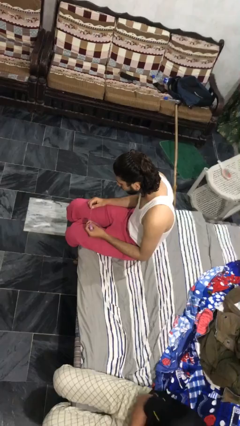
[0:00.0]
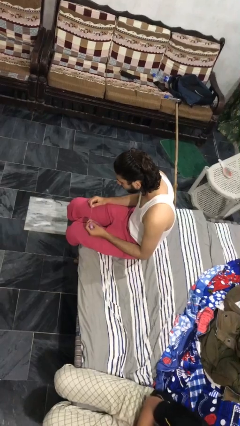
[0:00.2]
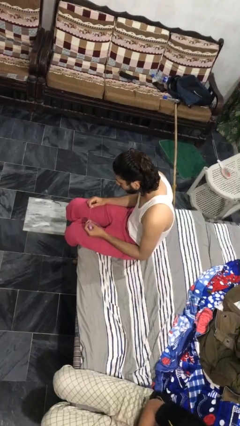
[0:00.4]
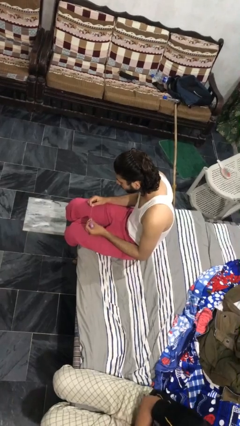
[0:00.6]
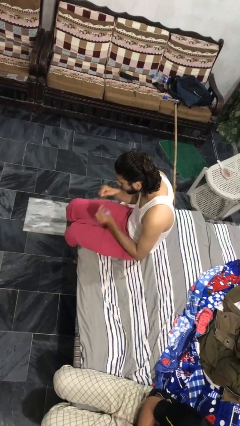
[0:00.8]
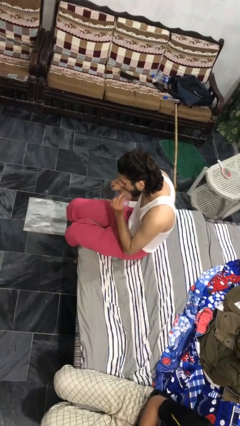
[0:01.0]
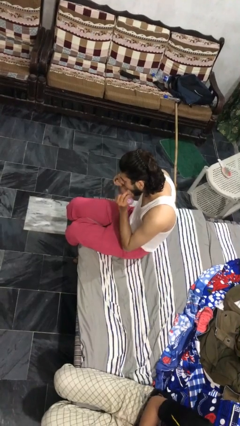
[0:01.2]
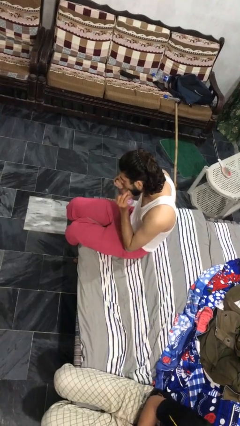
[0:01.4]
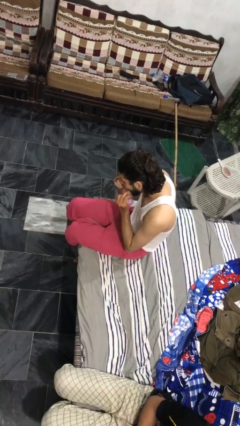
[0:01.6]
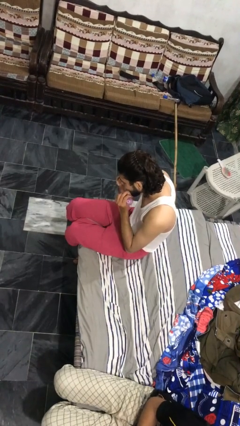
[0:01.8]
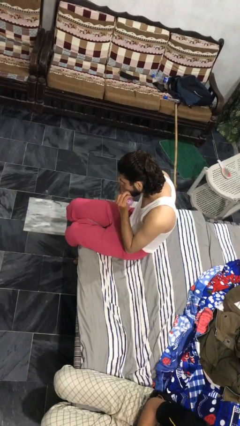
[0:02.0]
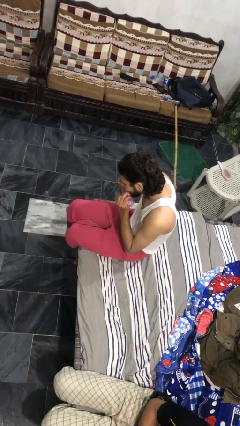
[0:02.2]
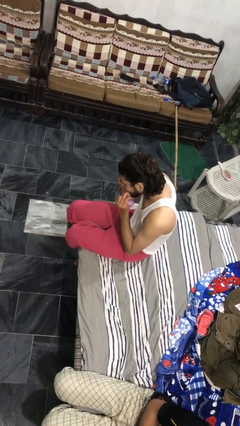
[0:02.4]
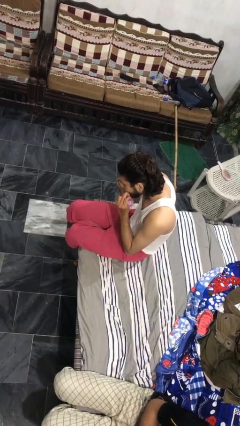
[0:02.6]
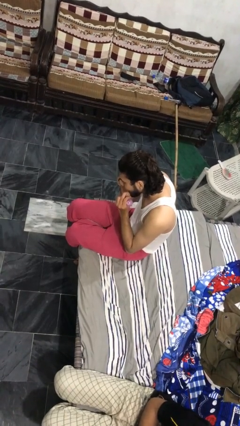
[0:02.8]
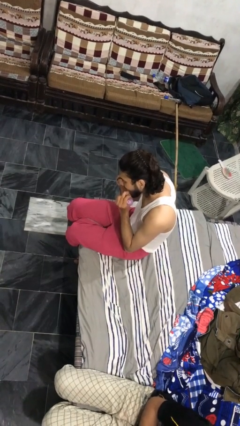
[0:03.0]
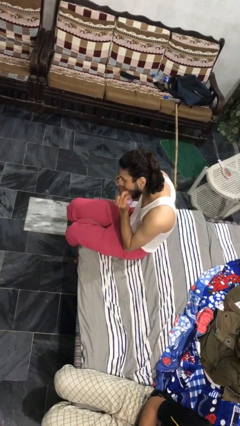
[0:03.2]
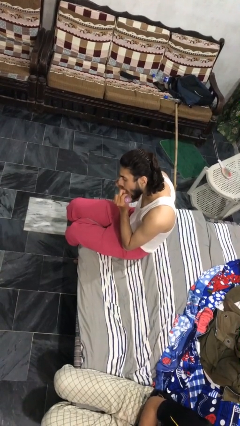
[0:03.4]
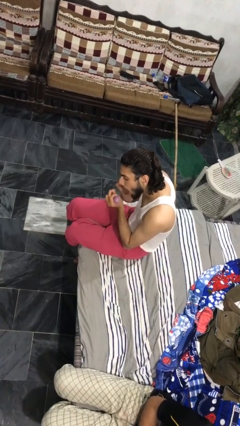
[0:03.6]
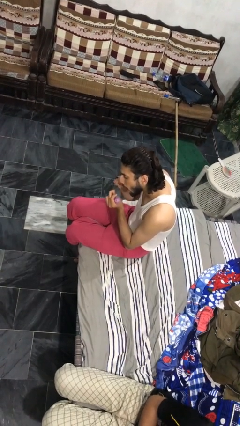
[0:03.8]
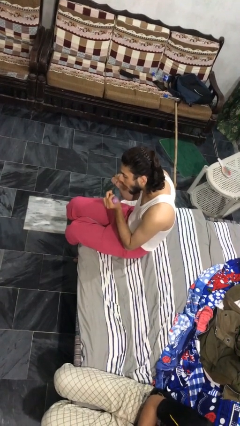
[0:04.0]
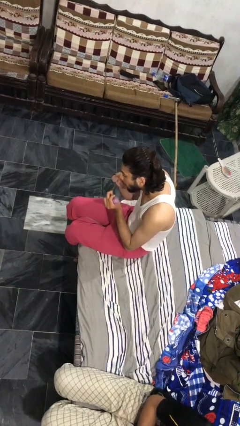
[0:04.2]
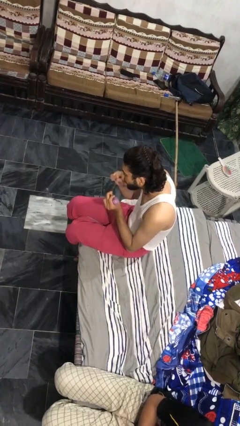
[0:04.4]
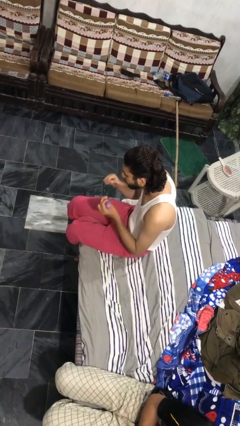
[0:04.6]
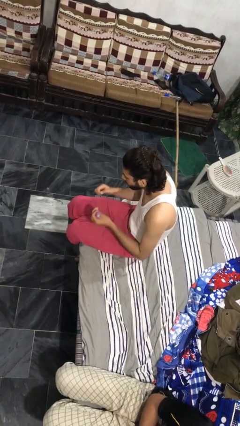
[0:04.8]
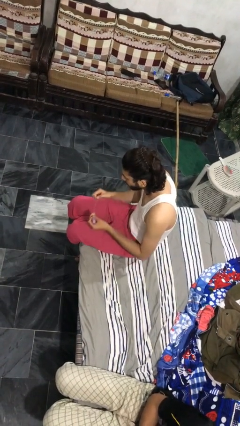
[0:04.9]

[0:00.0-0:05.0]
person flosses

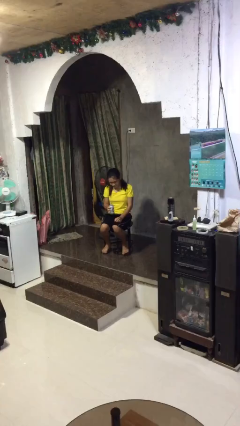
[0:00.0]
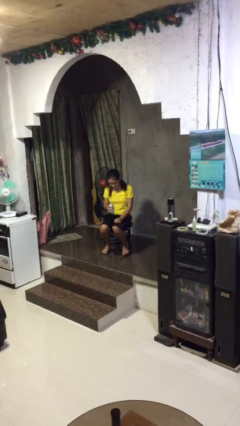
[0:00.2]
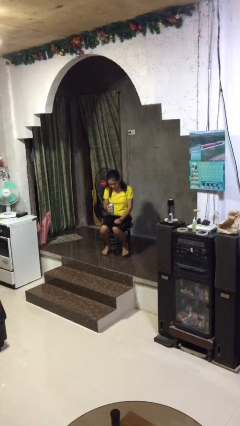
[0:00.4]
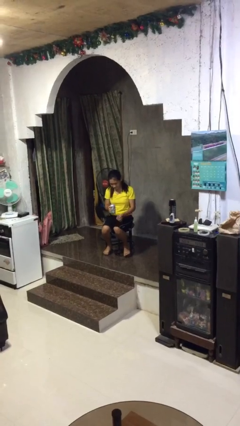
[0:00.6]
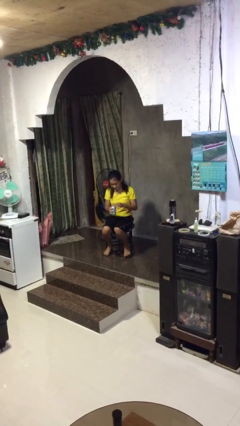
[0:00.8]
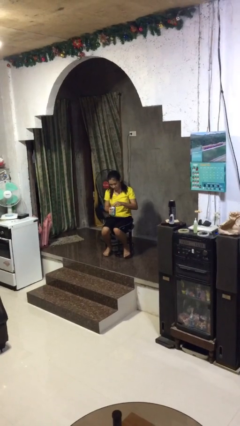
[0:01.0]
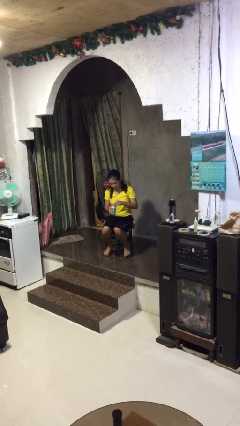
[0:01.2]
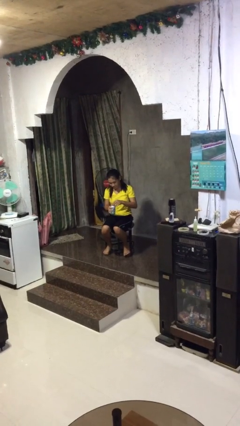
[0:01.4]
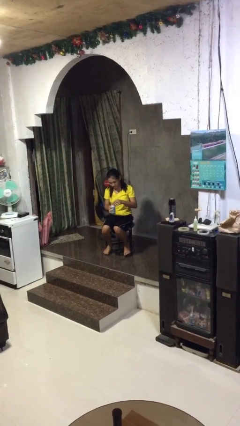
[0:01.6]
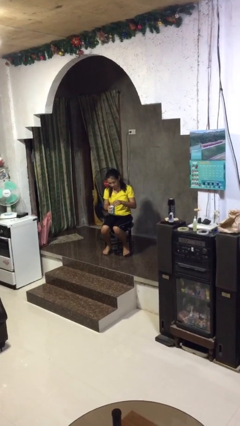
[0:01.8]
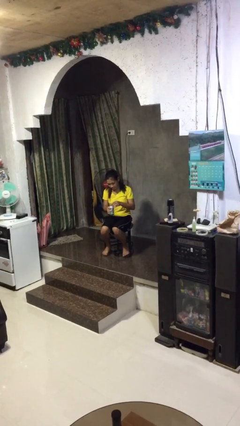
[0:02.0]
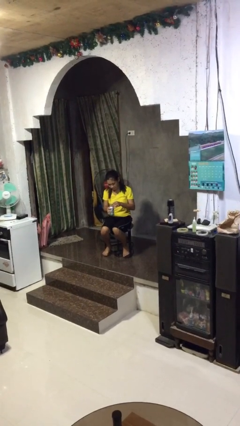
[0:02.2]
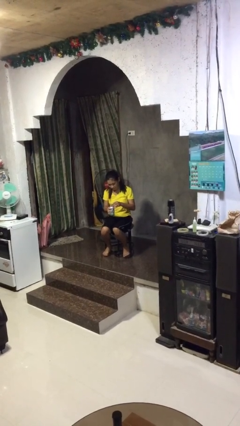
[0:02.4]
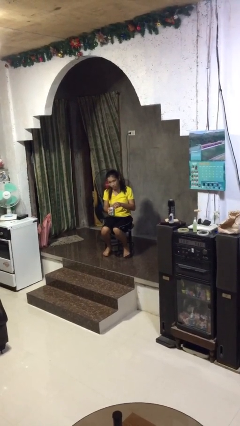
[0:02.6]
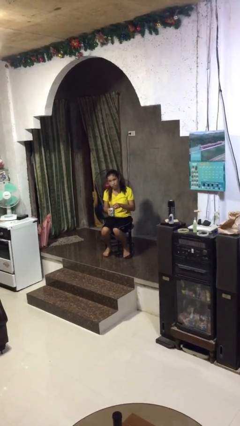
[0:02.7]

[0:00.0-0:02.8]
person opens beverage can

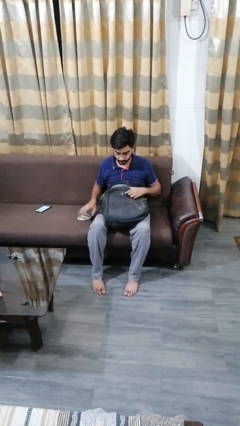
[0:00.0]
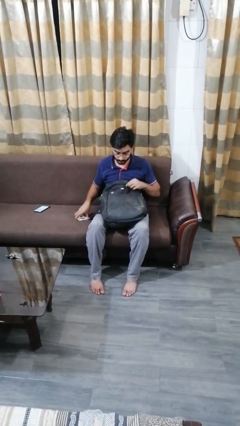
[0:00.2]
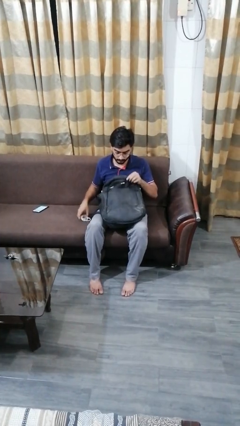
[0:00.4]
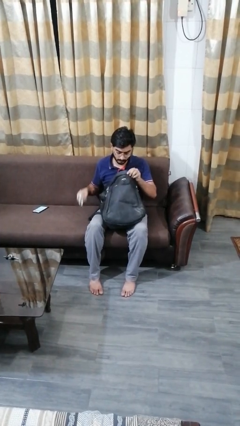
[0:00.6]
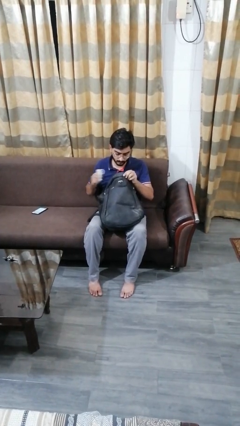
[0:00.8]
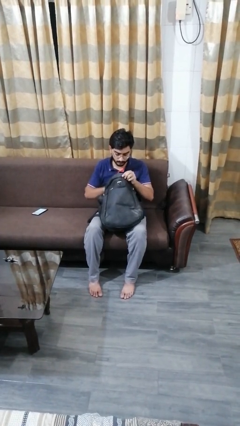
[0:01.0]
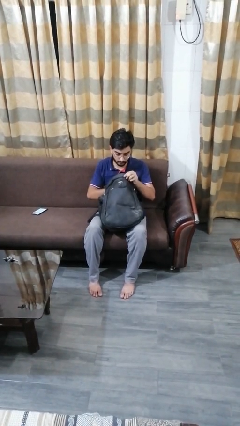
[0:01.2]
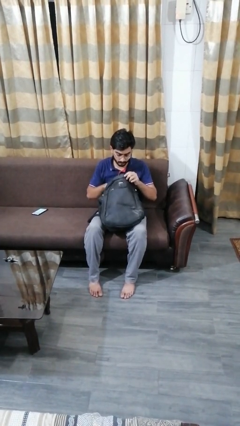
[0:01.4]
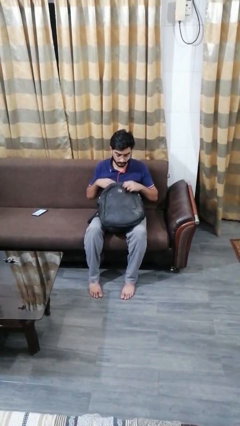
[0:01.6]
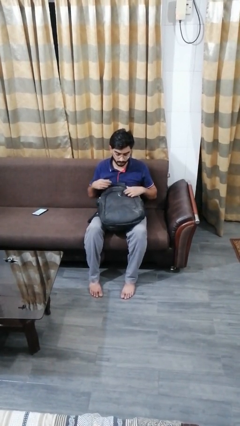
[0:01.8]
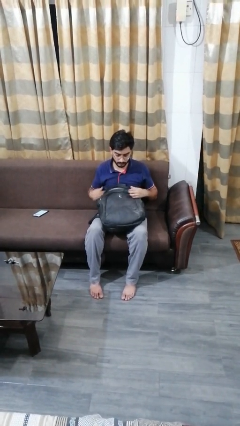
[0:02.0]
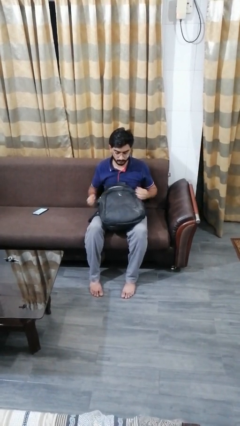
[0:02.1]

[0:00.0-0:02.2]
person puts object into backpack

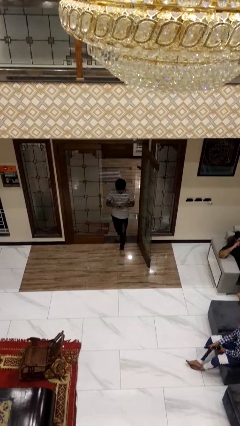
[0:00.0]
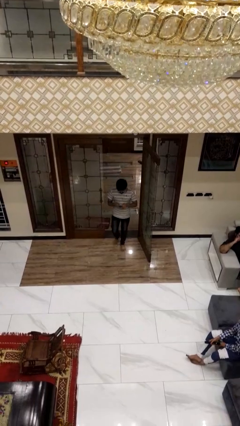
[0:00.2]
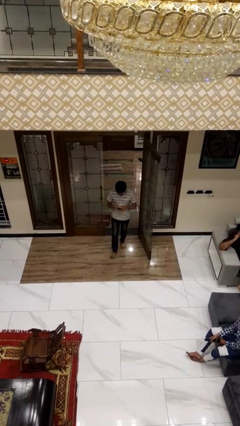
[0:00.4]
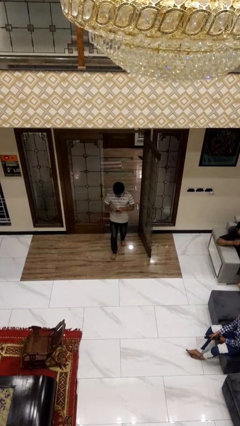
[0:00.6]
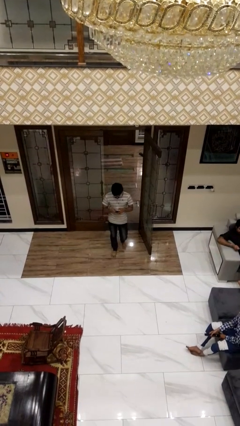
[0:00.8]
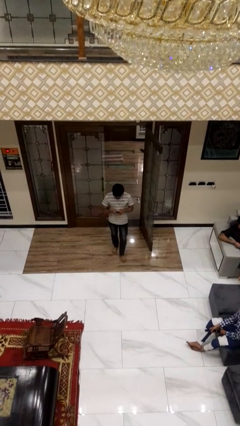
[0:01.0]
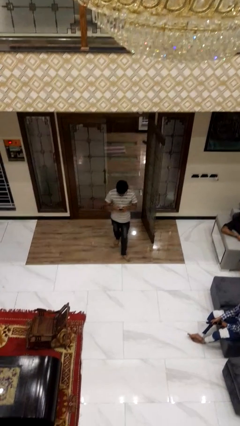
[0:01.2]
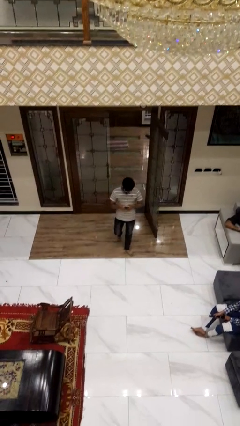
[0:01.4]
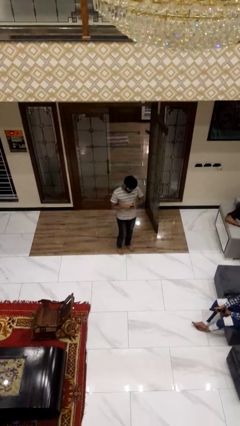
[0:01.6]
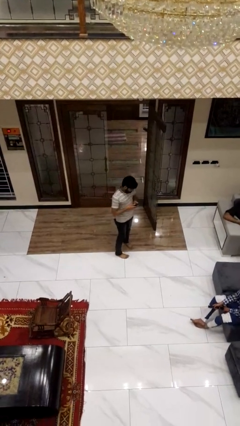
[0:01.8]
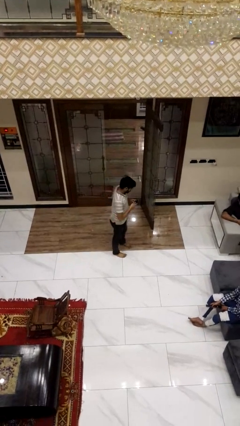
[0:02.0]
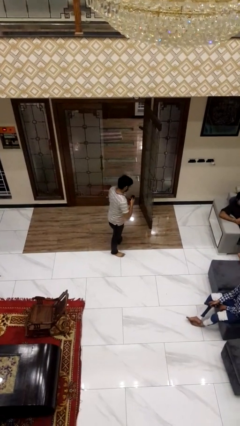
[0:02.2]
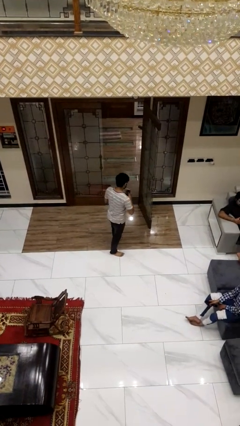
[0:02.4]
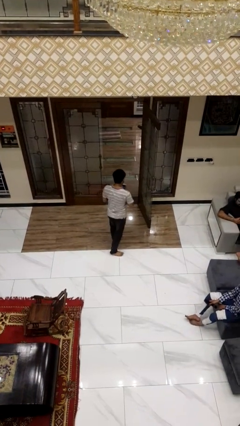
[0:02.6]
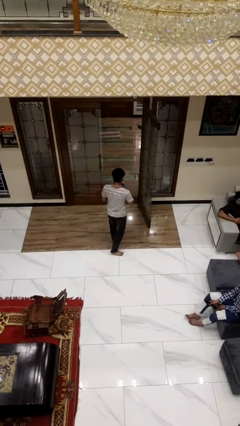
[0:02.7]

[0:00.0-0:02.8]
person enters scene through structure

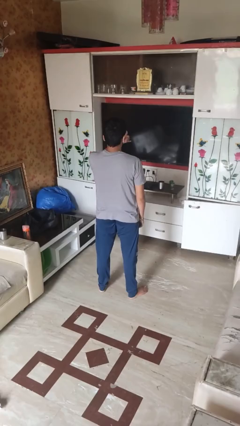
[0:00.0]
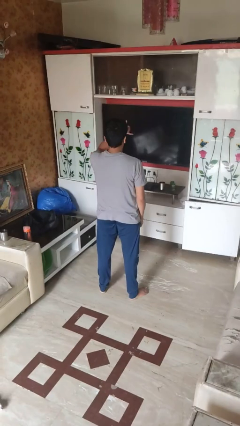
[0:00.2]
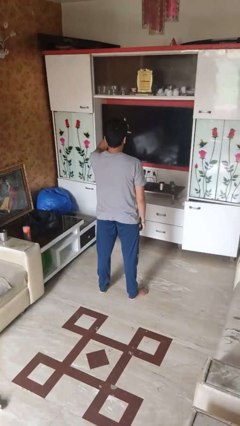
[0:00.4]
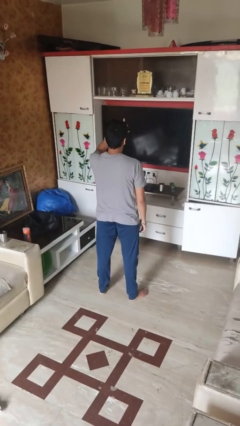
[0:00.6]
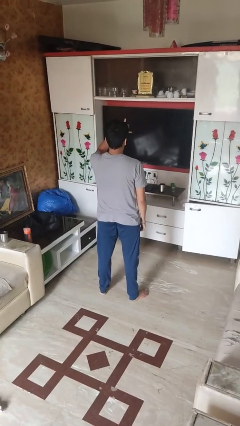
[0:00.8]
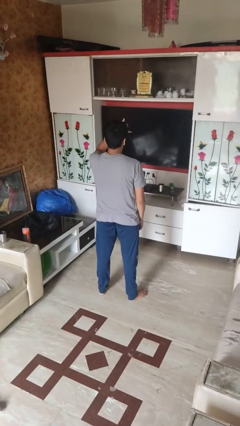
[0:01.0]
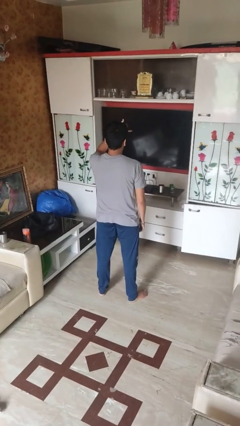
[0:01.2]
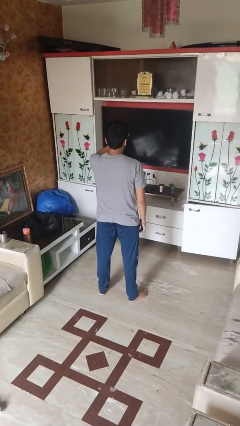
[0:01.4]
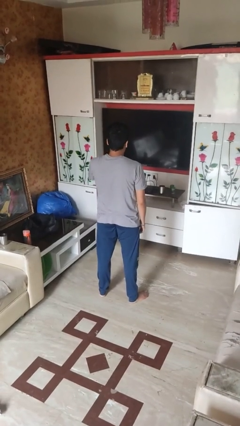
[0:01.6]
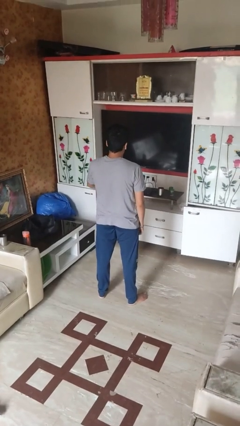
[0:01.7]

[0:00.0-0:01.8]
person gestures hang loose

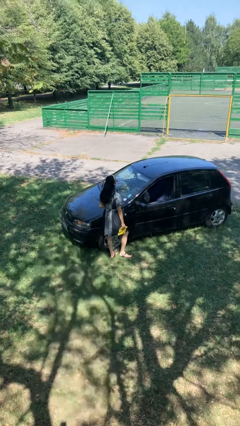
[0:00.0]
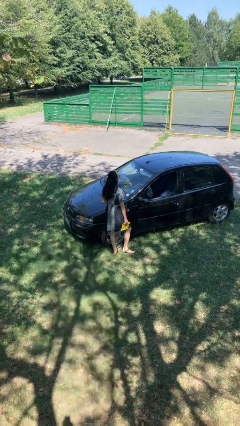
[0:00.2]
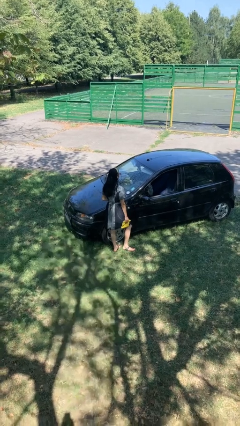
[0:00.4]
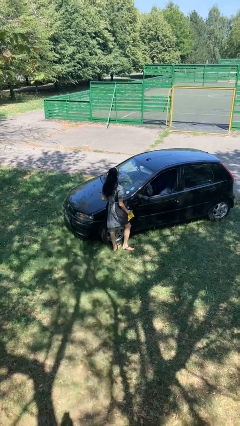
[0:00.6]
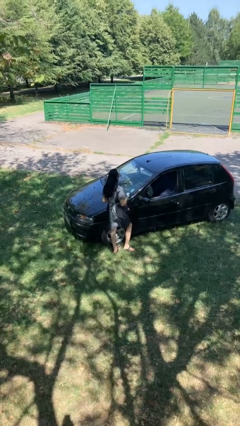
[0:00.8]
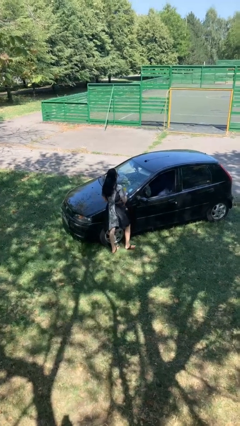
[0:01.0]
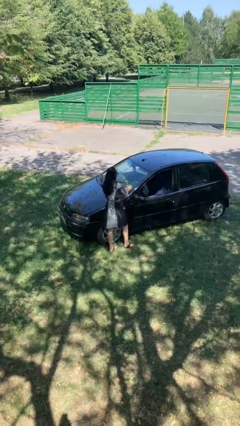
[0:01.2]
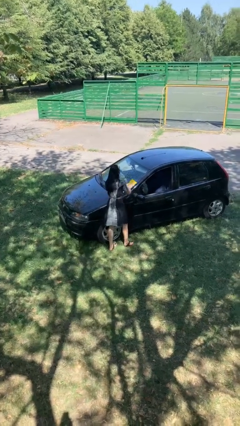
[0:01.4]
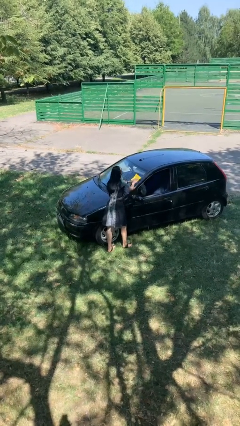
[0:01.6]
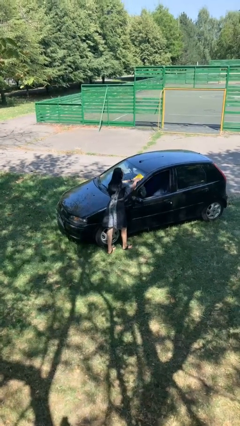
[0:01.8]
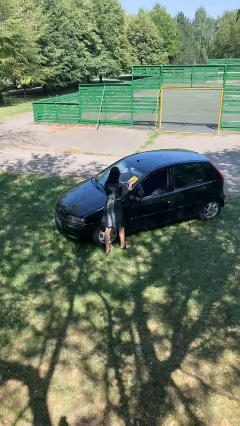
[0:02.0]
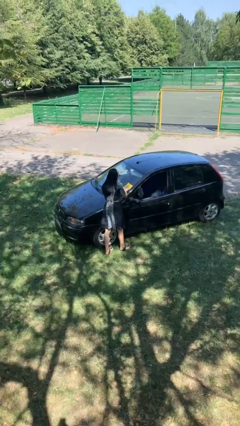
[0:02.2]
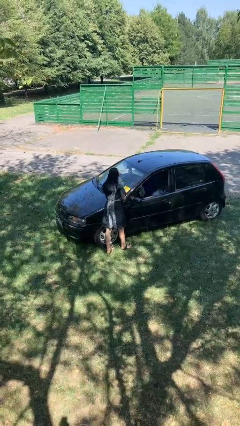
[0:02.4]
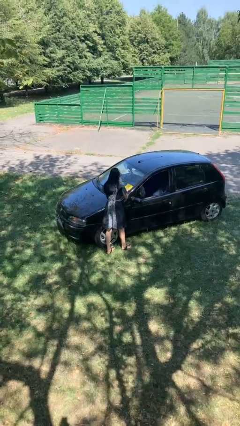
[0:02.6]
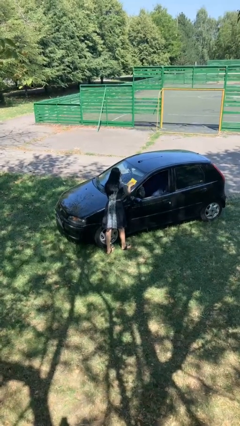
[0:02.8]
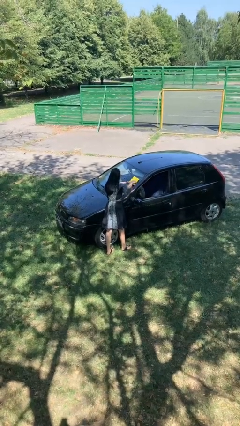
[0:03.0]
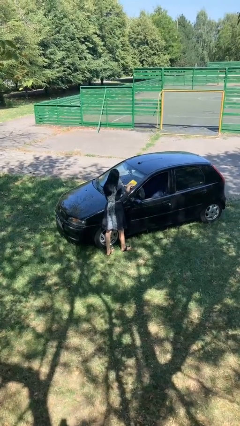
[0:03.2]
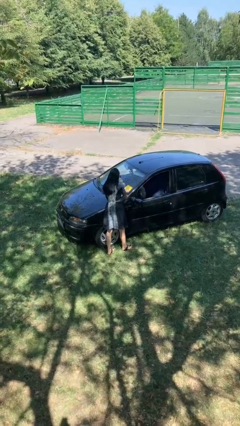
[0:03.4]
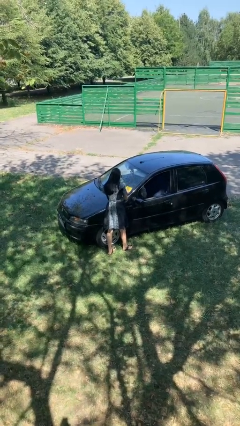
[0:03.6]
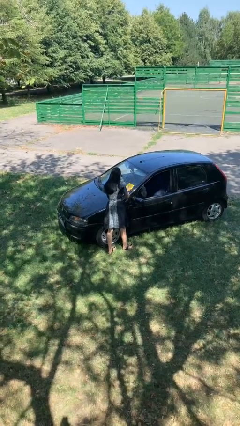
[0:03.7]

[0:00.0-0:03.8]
person polishes car with rag
